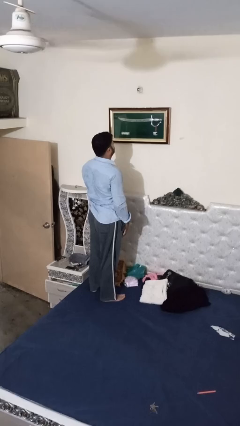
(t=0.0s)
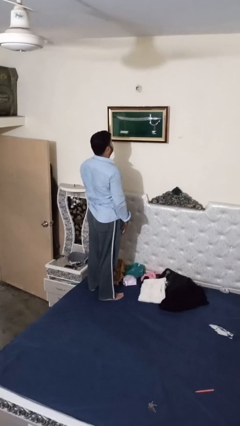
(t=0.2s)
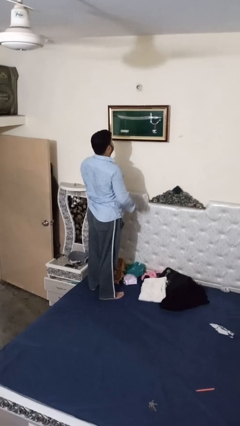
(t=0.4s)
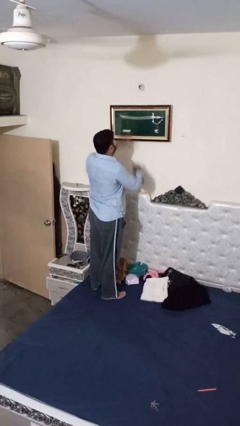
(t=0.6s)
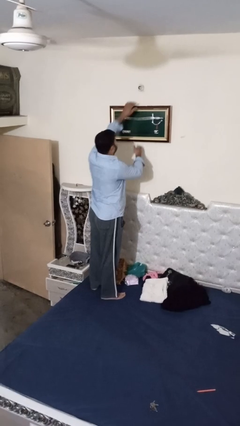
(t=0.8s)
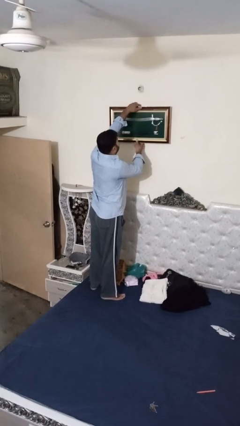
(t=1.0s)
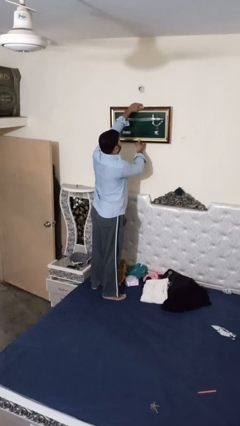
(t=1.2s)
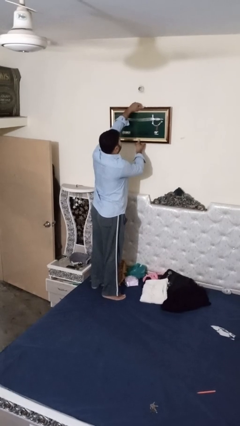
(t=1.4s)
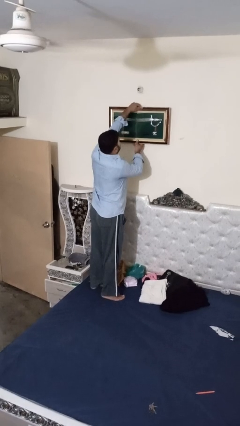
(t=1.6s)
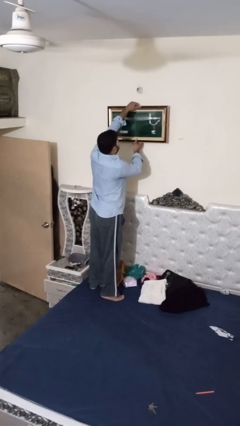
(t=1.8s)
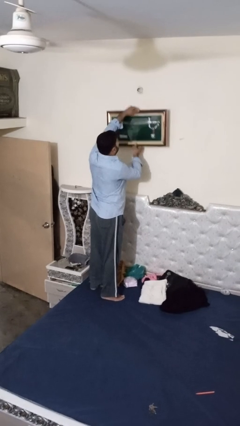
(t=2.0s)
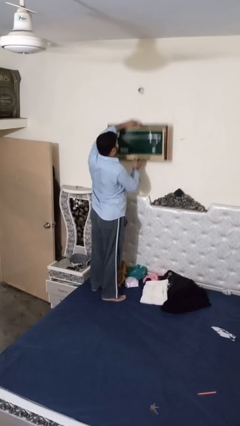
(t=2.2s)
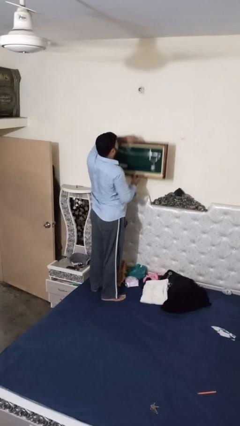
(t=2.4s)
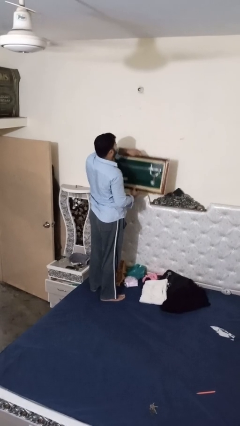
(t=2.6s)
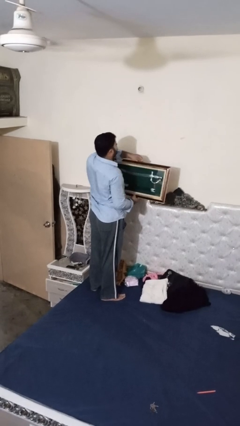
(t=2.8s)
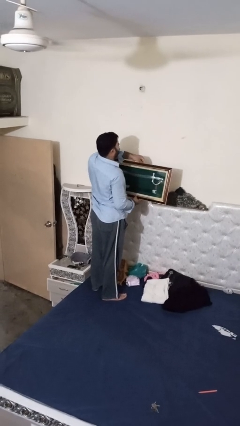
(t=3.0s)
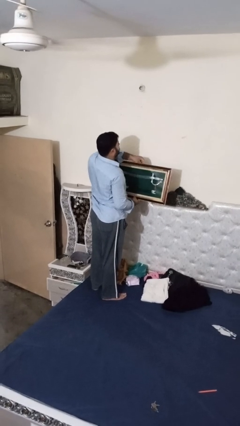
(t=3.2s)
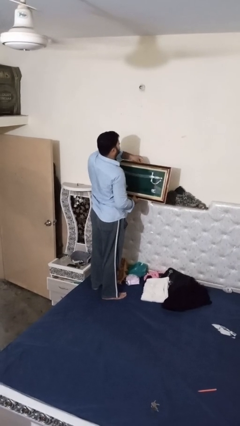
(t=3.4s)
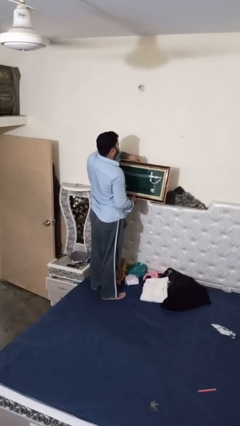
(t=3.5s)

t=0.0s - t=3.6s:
person takes down picture frame

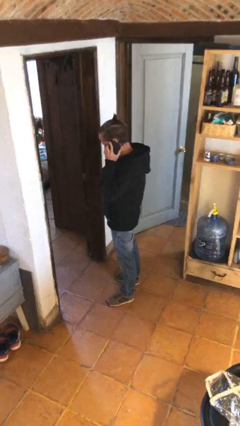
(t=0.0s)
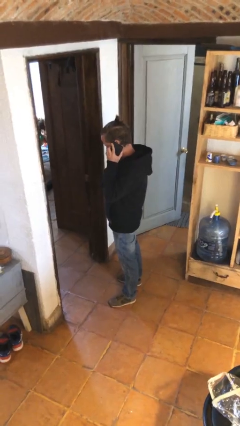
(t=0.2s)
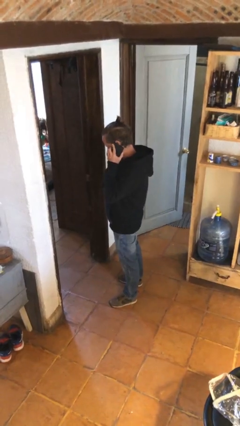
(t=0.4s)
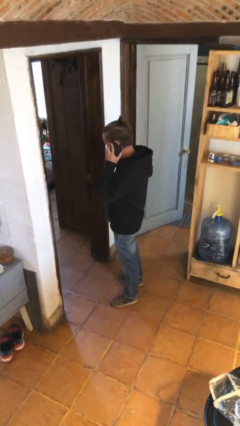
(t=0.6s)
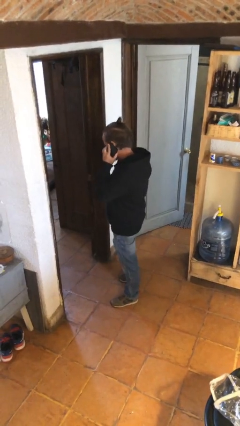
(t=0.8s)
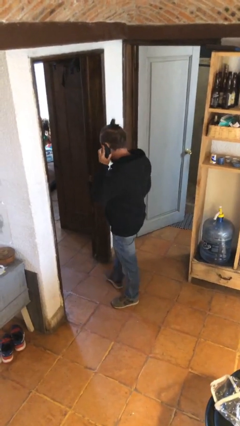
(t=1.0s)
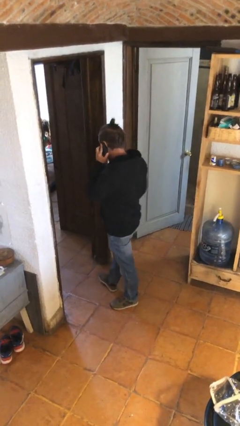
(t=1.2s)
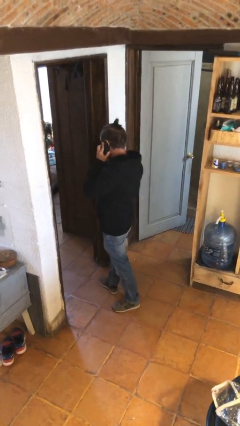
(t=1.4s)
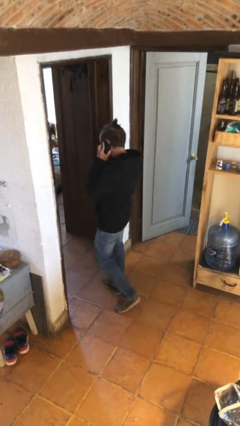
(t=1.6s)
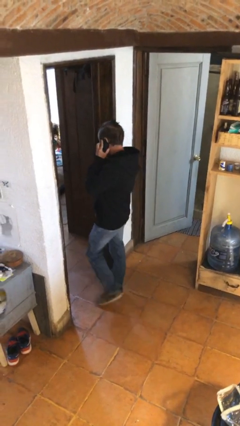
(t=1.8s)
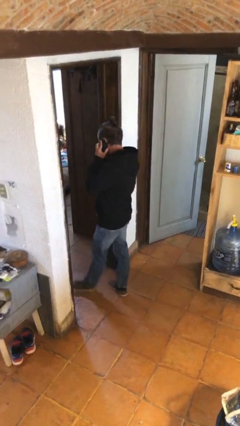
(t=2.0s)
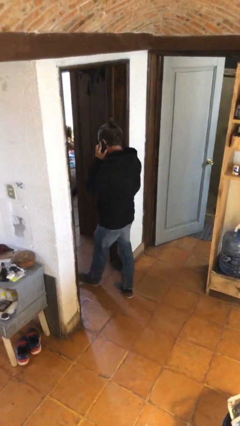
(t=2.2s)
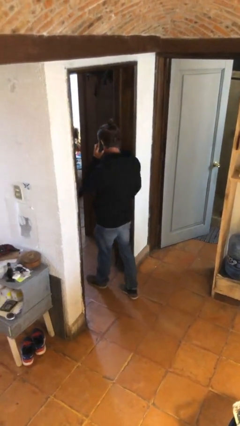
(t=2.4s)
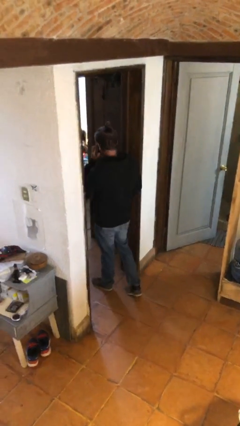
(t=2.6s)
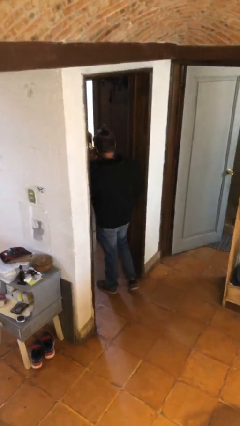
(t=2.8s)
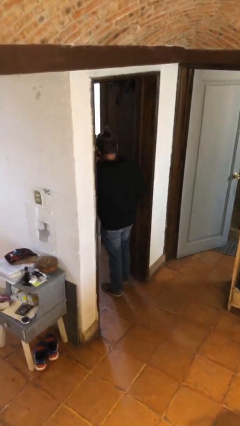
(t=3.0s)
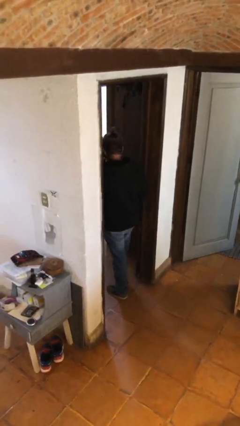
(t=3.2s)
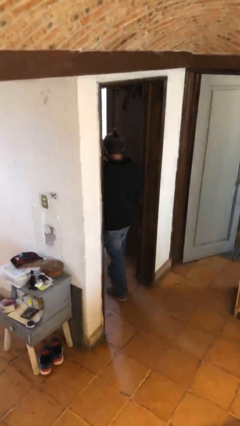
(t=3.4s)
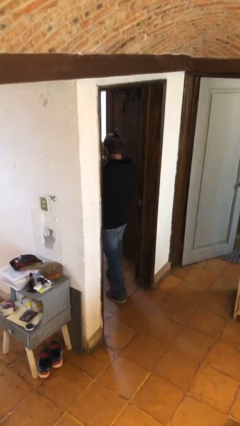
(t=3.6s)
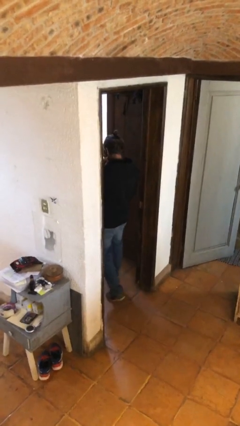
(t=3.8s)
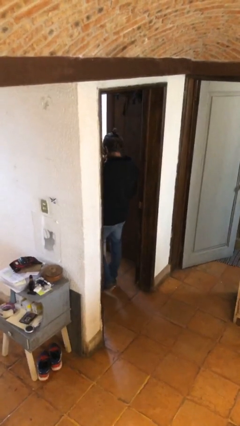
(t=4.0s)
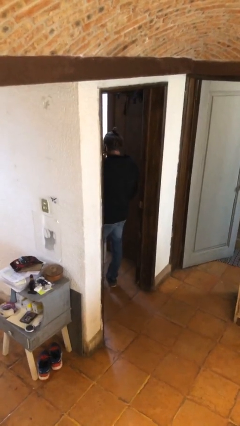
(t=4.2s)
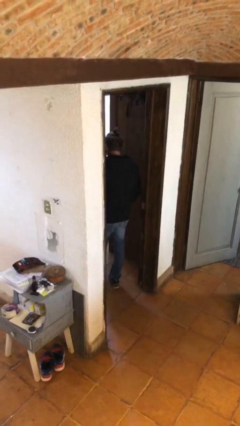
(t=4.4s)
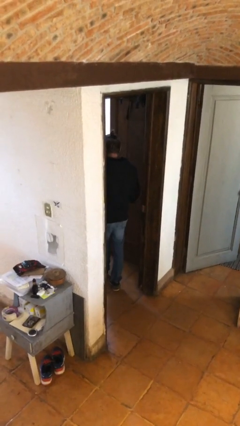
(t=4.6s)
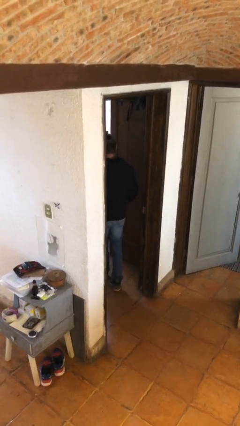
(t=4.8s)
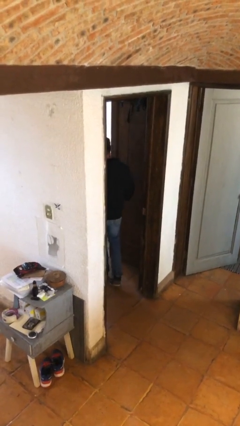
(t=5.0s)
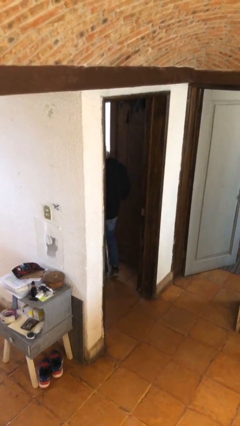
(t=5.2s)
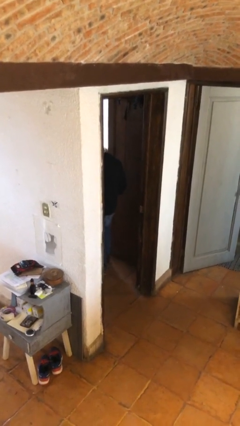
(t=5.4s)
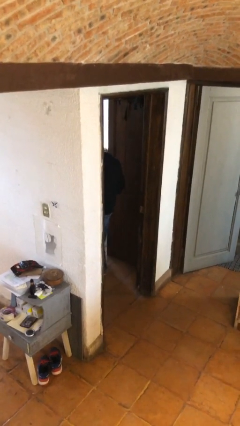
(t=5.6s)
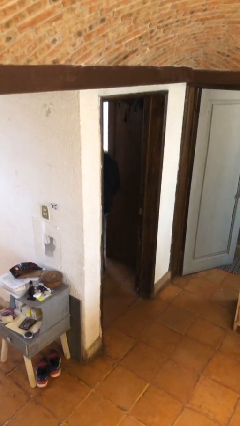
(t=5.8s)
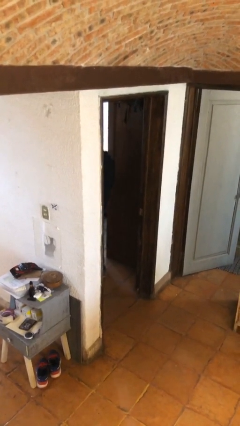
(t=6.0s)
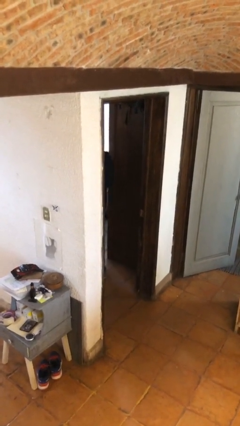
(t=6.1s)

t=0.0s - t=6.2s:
person exits scene through structure

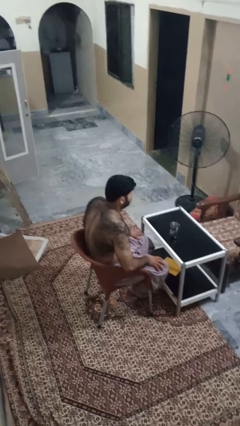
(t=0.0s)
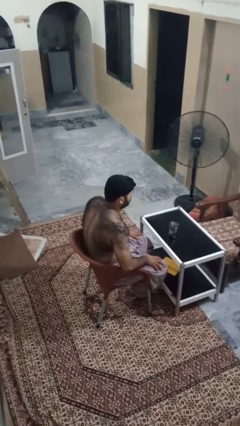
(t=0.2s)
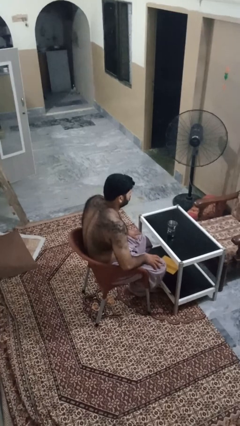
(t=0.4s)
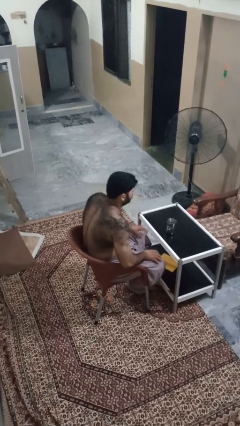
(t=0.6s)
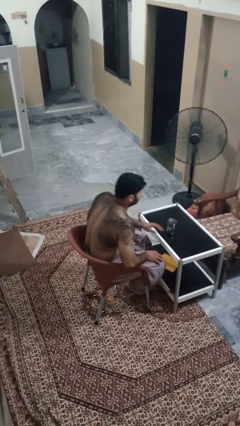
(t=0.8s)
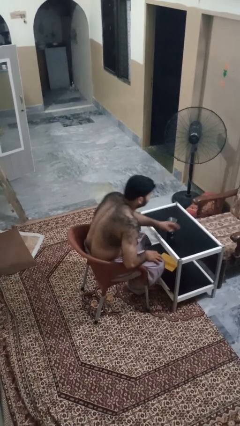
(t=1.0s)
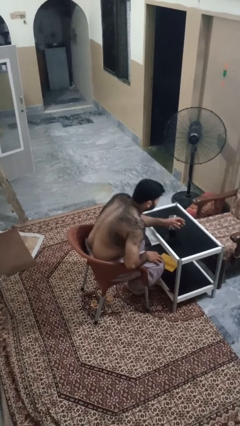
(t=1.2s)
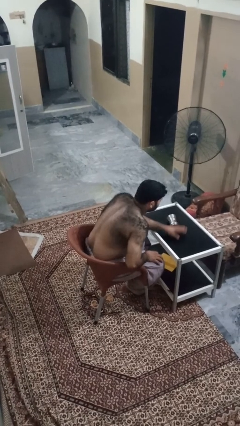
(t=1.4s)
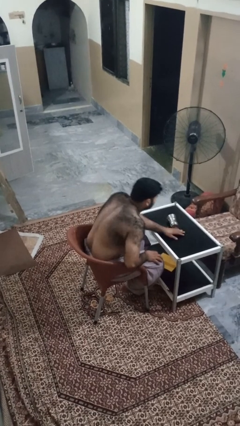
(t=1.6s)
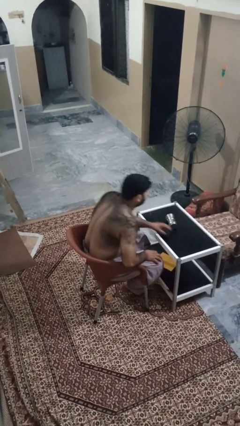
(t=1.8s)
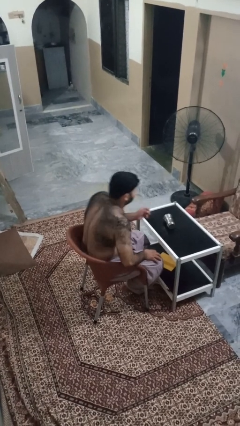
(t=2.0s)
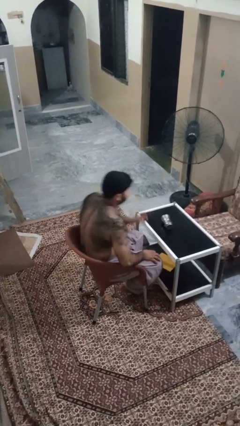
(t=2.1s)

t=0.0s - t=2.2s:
person knocks over glass

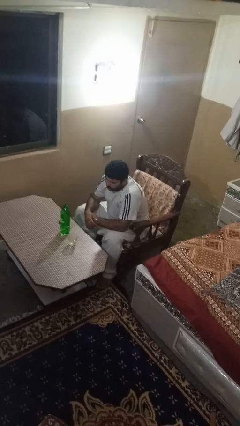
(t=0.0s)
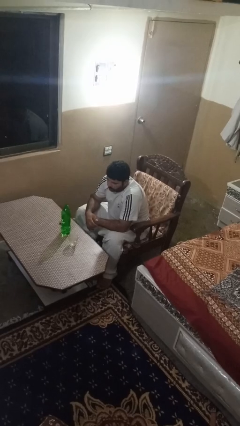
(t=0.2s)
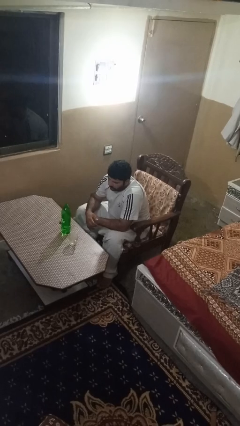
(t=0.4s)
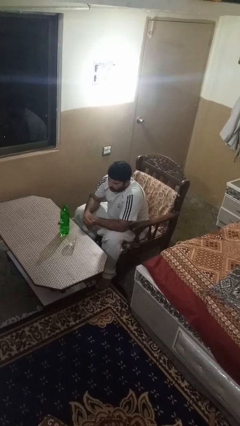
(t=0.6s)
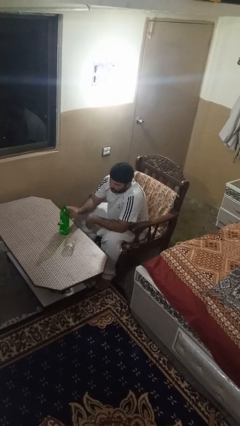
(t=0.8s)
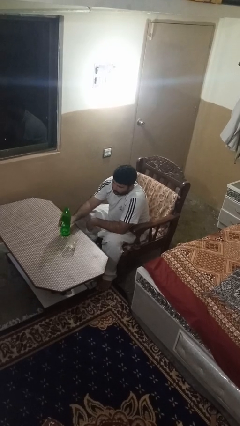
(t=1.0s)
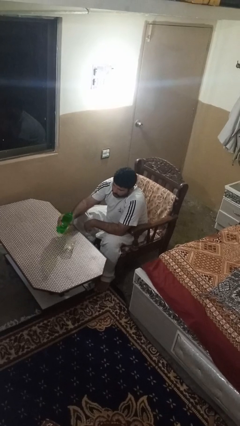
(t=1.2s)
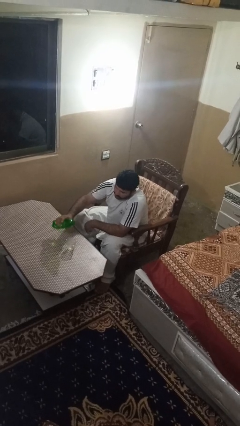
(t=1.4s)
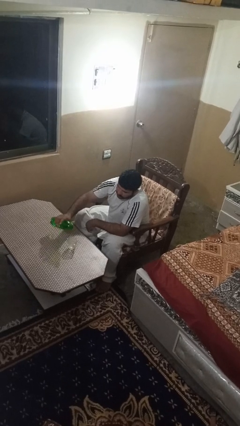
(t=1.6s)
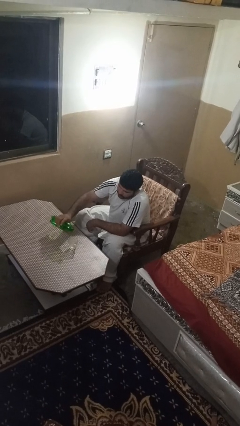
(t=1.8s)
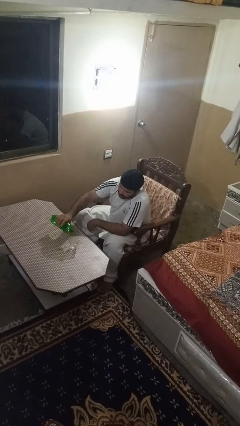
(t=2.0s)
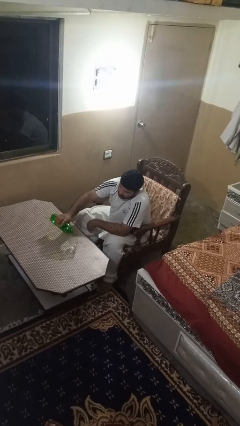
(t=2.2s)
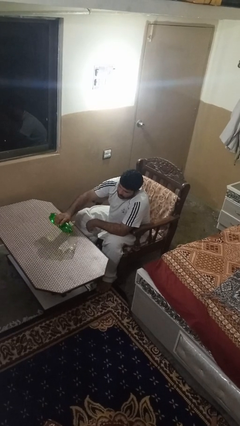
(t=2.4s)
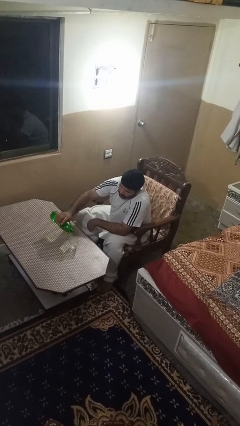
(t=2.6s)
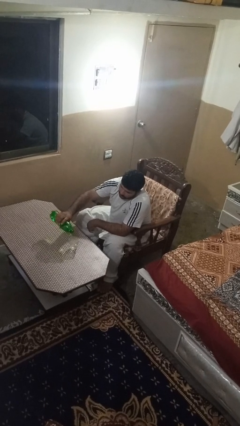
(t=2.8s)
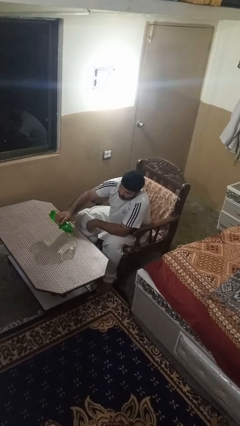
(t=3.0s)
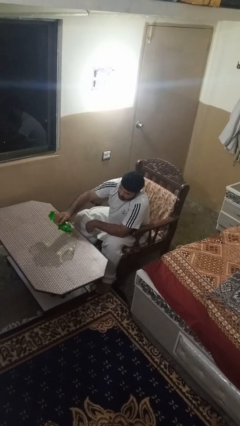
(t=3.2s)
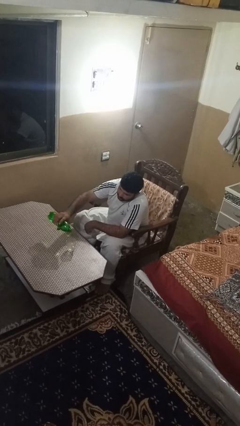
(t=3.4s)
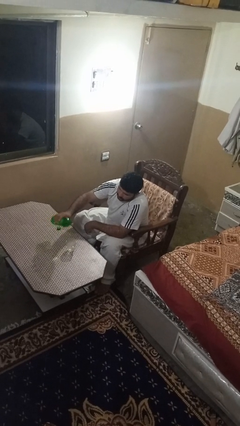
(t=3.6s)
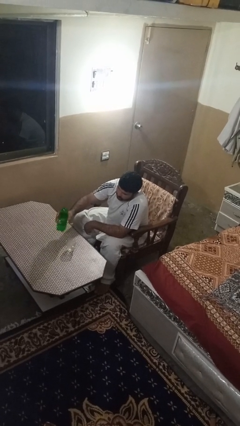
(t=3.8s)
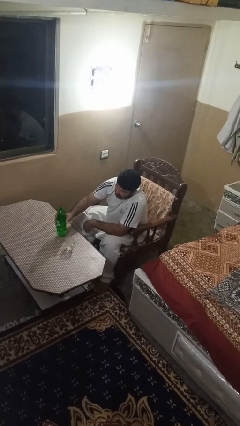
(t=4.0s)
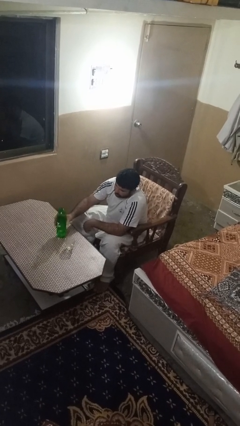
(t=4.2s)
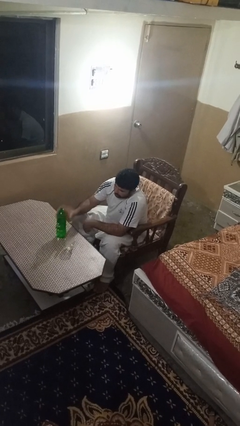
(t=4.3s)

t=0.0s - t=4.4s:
person pours liquid into cup

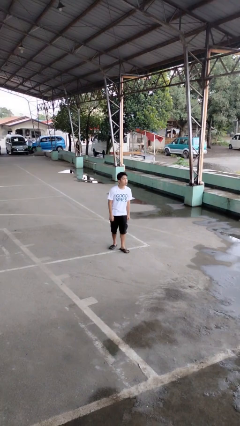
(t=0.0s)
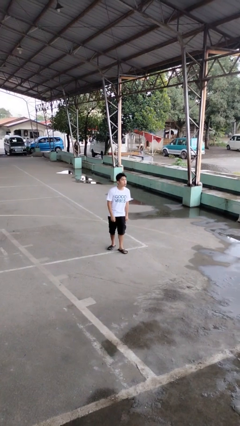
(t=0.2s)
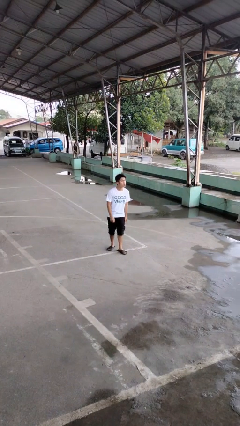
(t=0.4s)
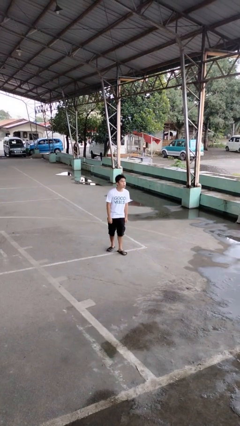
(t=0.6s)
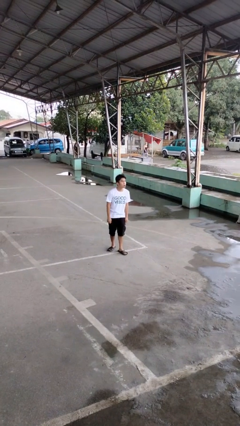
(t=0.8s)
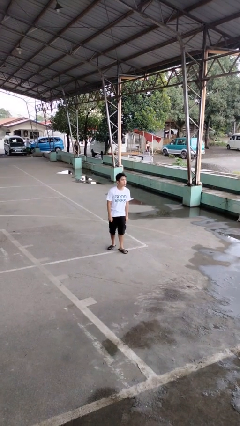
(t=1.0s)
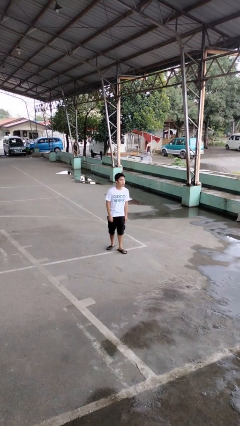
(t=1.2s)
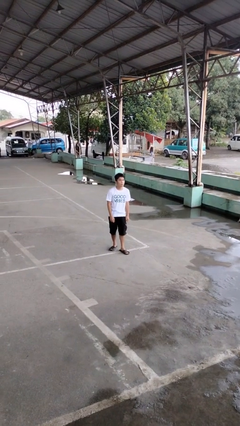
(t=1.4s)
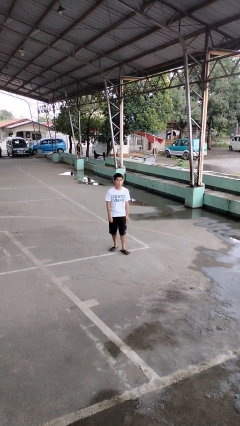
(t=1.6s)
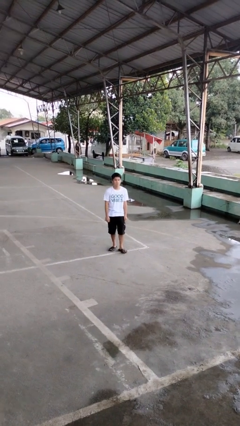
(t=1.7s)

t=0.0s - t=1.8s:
person sticks out tongue
